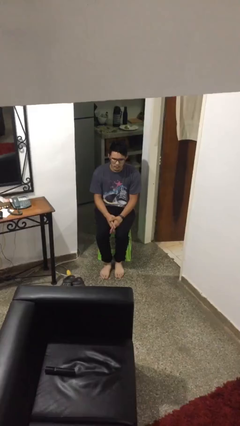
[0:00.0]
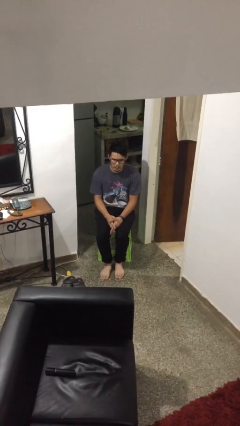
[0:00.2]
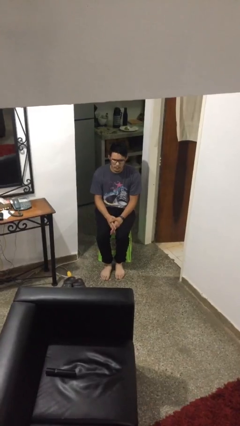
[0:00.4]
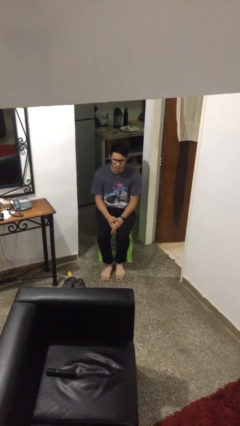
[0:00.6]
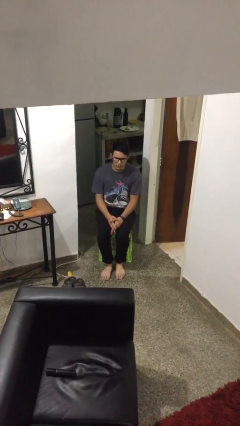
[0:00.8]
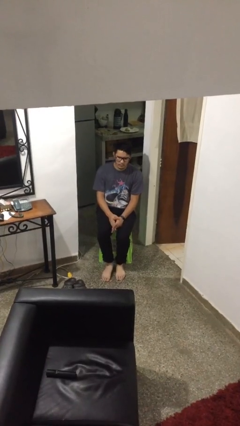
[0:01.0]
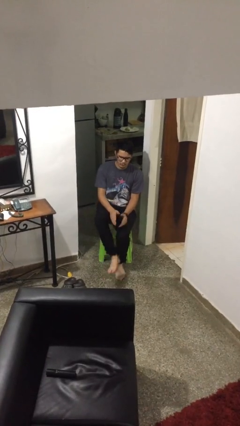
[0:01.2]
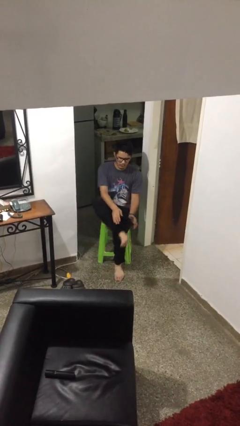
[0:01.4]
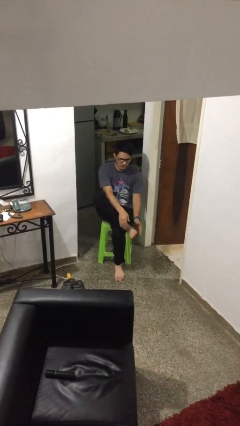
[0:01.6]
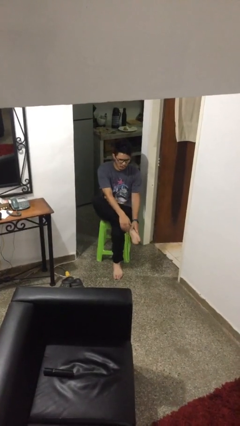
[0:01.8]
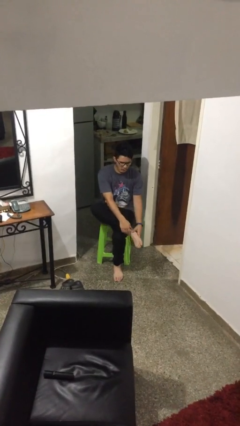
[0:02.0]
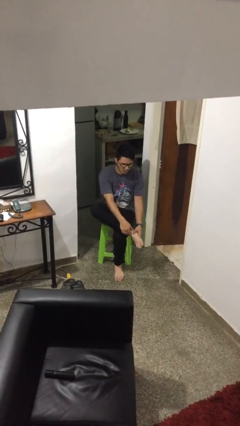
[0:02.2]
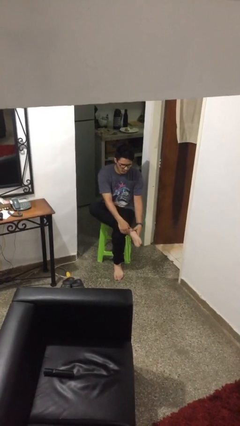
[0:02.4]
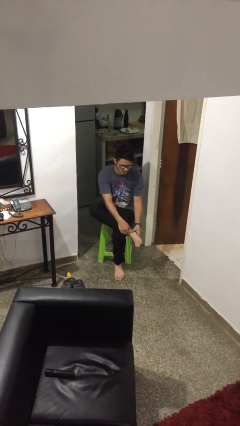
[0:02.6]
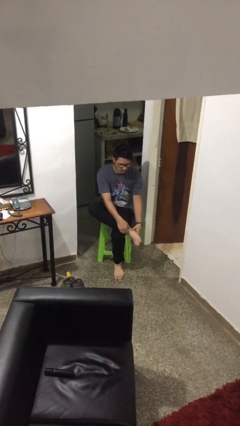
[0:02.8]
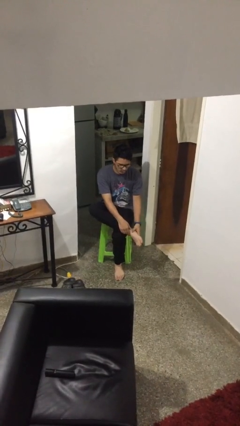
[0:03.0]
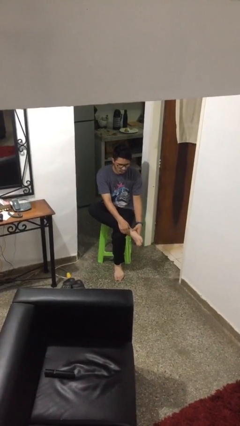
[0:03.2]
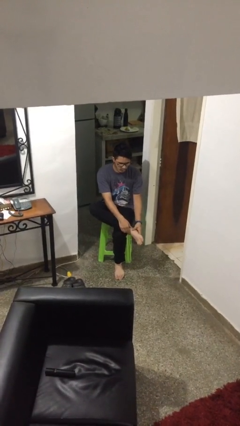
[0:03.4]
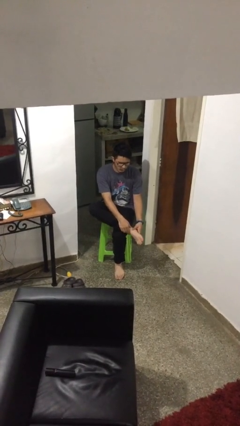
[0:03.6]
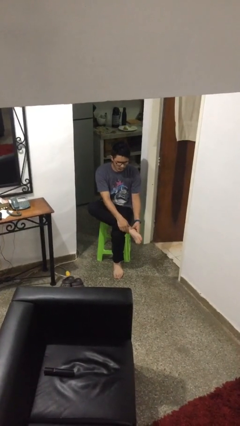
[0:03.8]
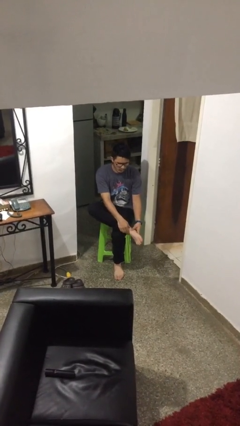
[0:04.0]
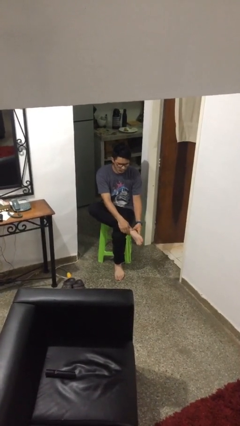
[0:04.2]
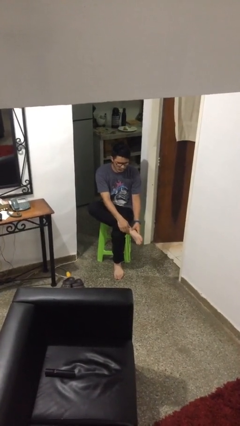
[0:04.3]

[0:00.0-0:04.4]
person rubs foot

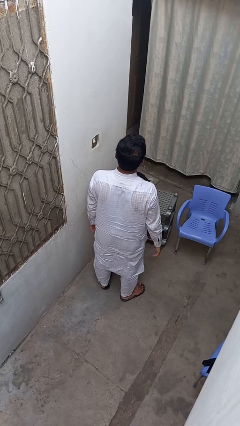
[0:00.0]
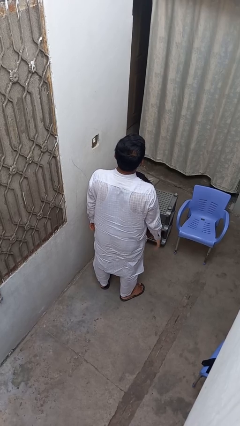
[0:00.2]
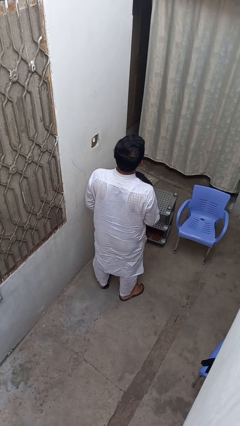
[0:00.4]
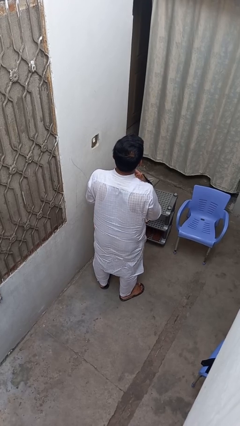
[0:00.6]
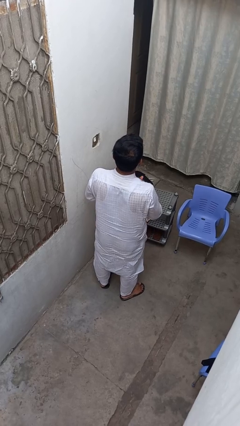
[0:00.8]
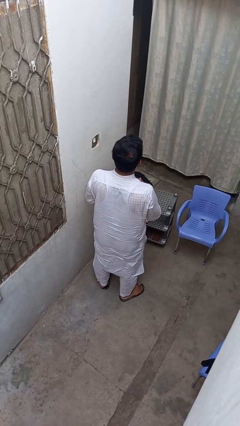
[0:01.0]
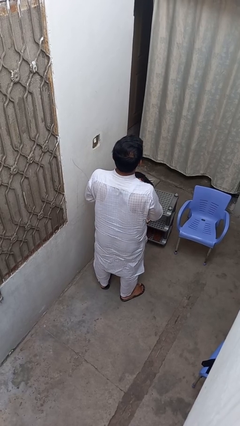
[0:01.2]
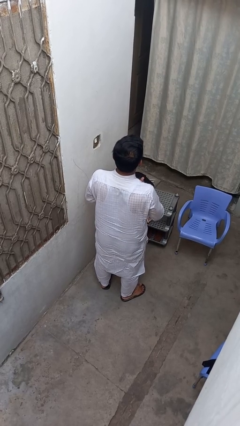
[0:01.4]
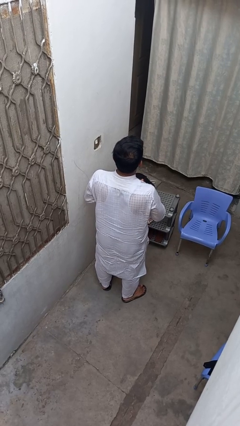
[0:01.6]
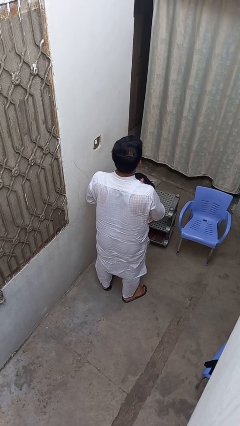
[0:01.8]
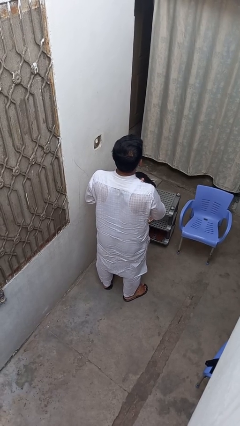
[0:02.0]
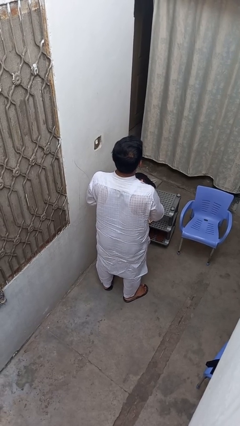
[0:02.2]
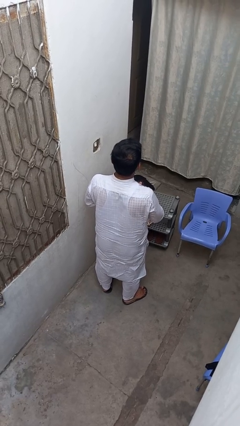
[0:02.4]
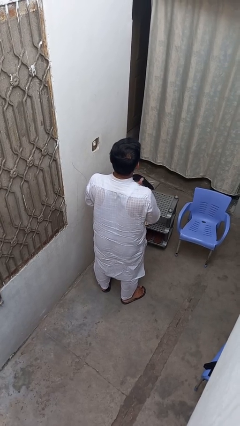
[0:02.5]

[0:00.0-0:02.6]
person drums on chest

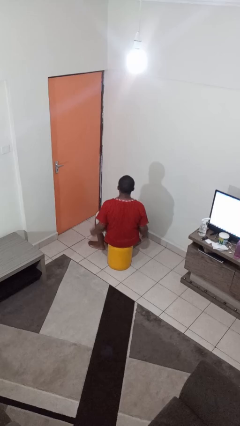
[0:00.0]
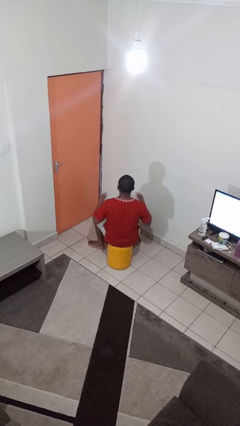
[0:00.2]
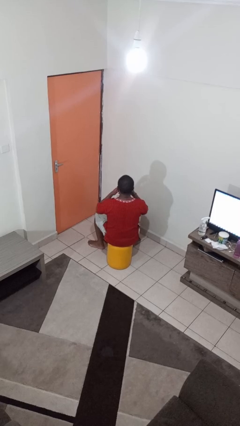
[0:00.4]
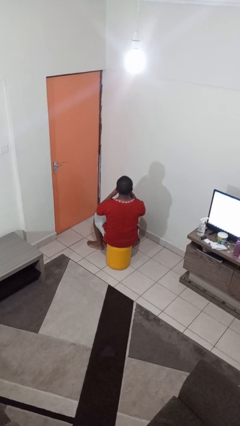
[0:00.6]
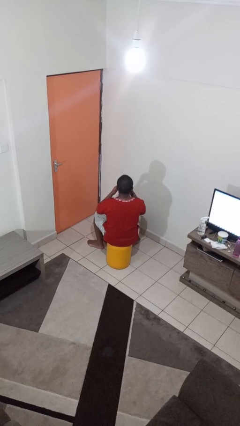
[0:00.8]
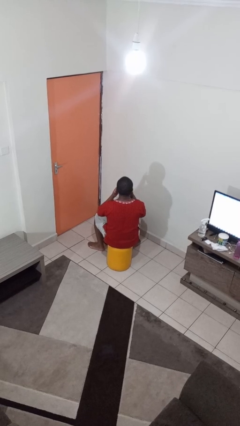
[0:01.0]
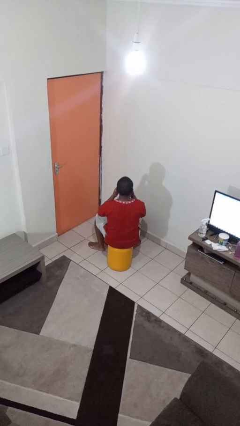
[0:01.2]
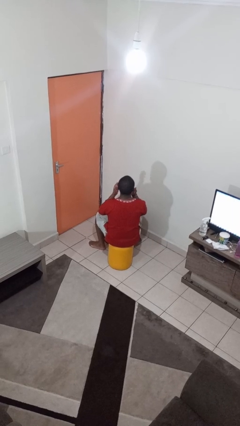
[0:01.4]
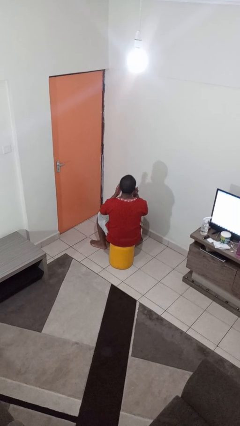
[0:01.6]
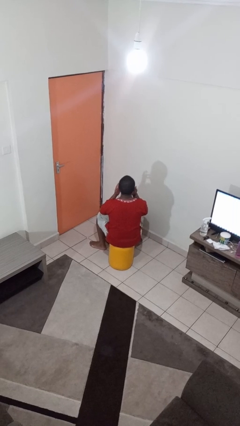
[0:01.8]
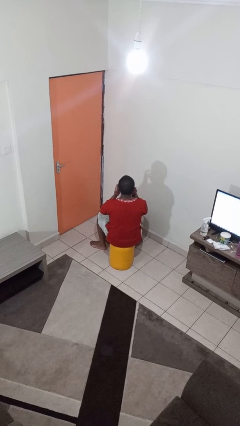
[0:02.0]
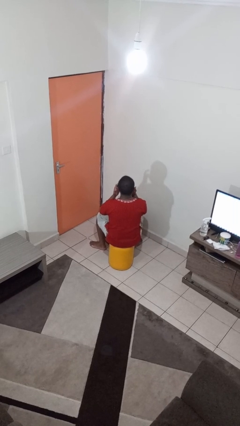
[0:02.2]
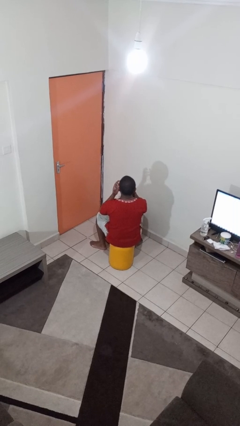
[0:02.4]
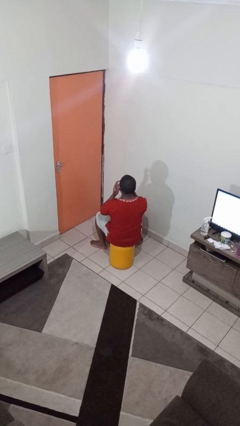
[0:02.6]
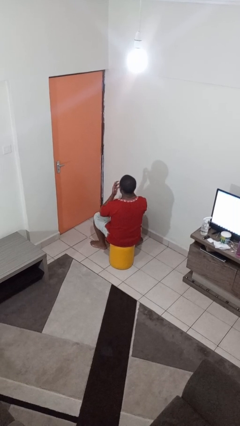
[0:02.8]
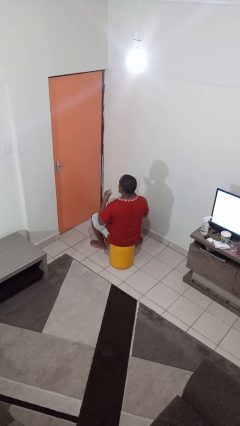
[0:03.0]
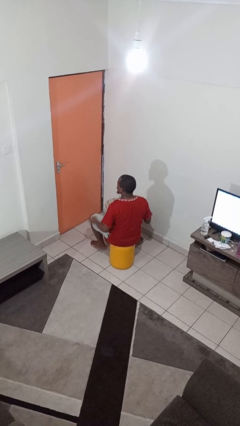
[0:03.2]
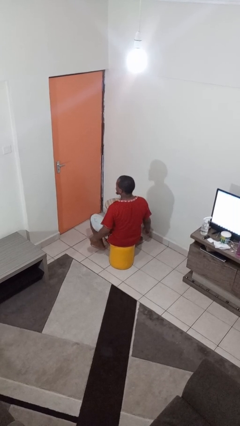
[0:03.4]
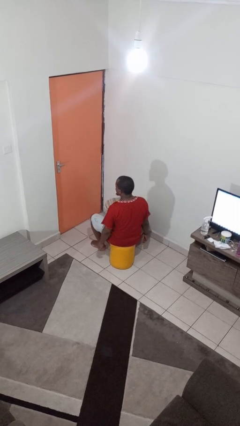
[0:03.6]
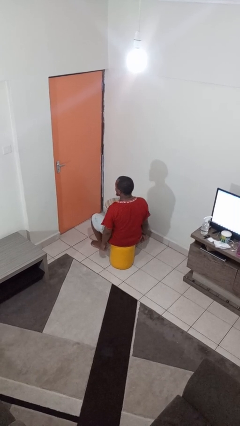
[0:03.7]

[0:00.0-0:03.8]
person licks fingers

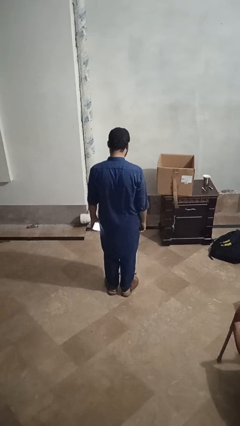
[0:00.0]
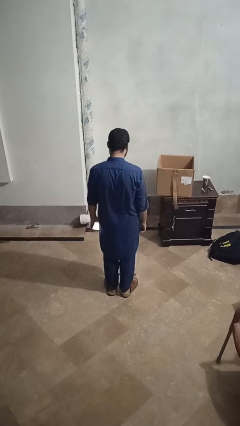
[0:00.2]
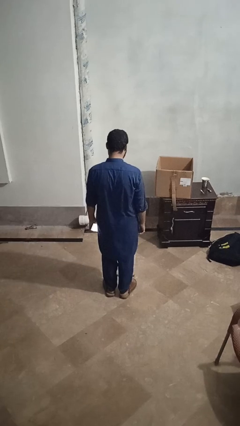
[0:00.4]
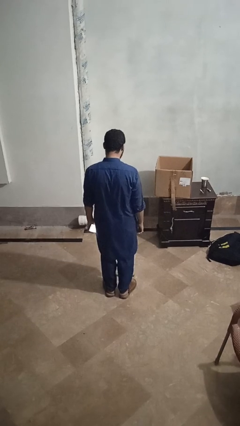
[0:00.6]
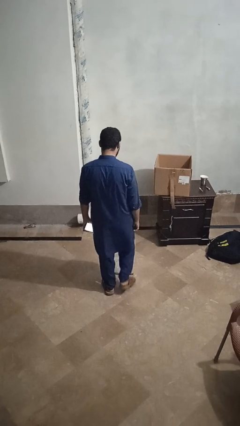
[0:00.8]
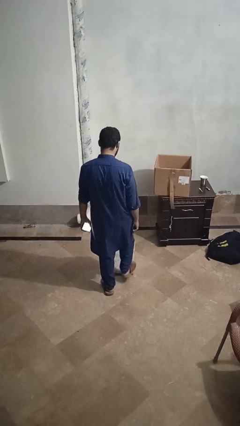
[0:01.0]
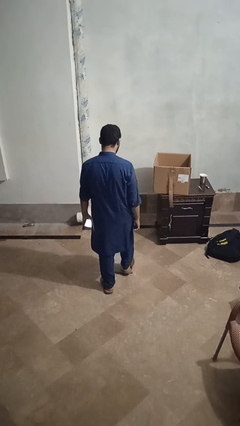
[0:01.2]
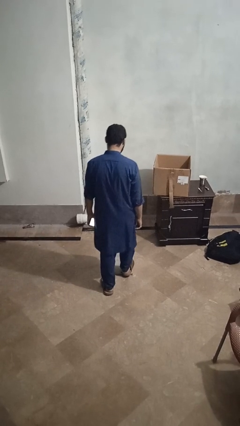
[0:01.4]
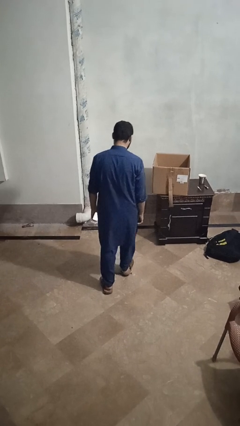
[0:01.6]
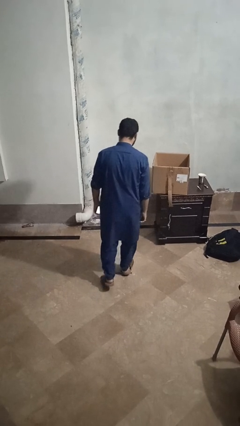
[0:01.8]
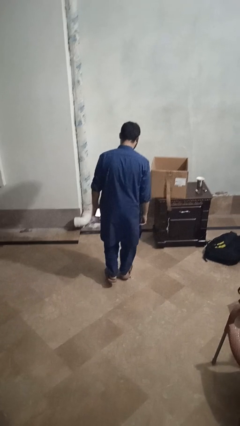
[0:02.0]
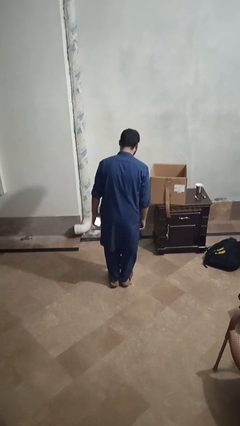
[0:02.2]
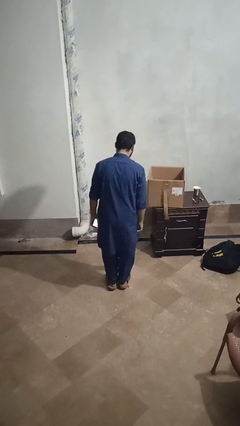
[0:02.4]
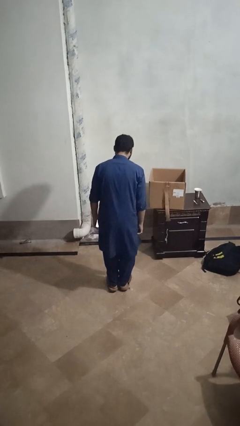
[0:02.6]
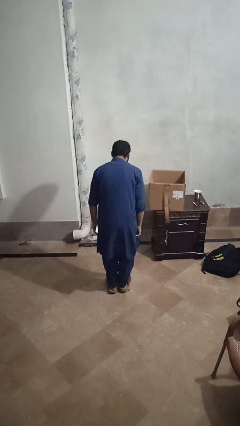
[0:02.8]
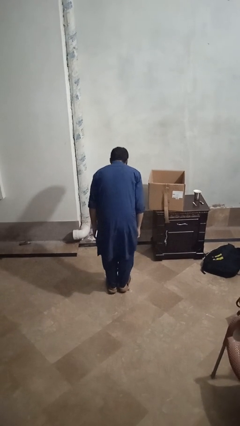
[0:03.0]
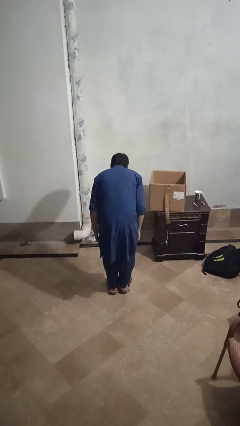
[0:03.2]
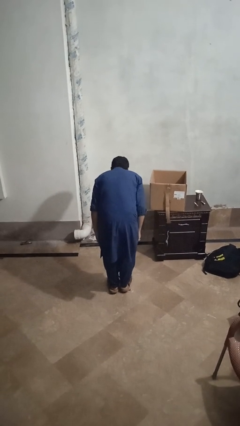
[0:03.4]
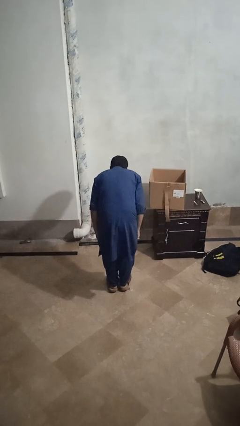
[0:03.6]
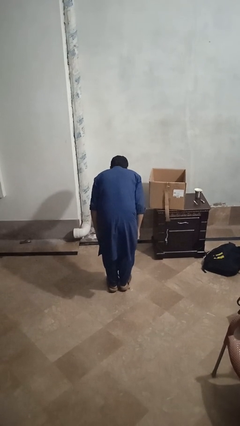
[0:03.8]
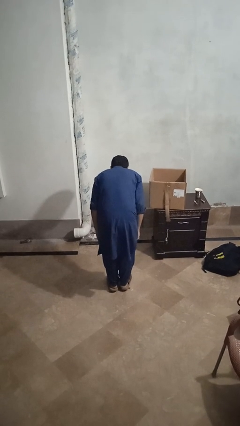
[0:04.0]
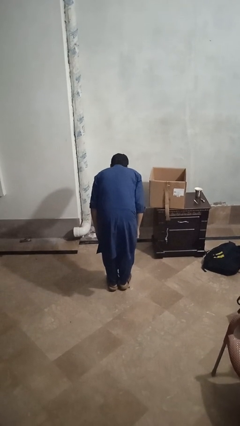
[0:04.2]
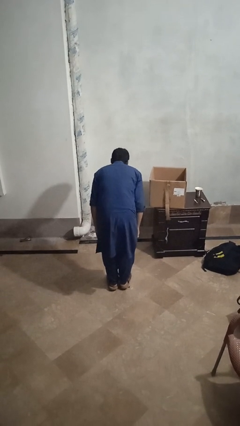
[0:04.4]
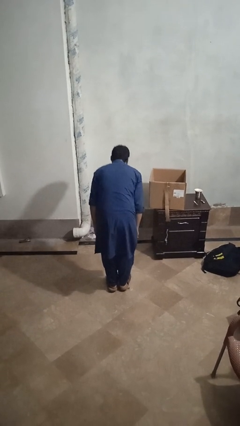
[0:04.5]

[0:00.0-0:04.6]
person uses bodyweight scale

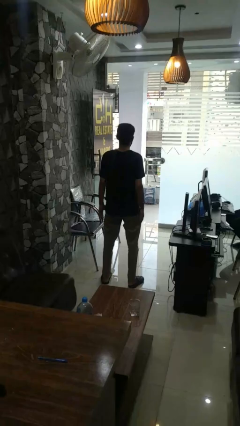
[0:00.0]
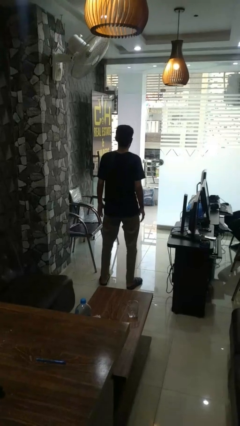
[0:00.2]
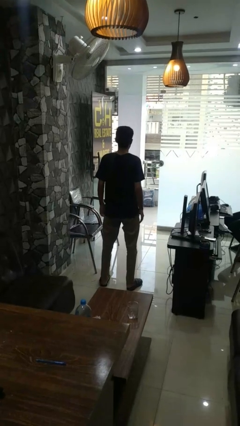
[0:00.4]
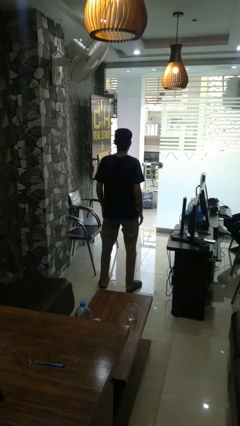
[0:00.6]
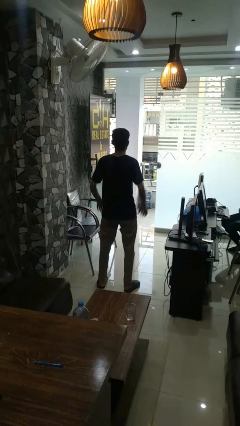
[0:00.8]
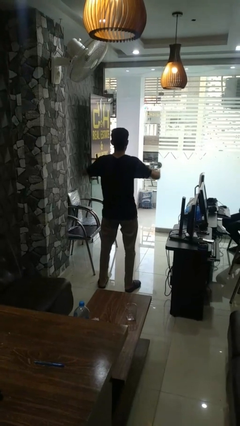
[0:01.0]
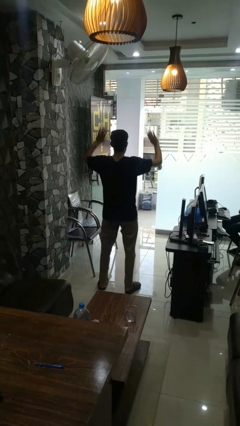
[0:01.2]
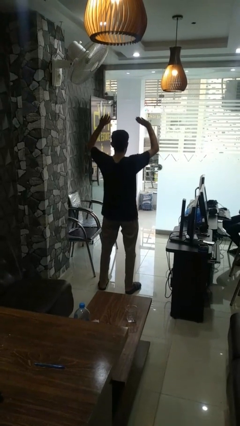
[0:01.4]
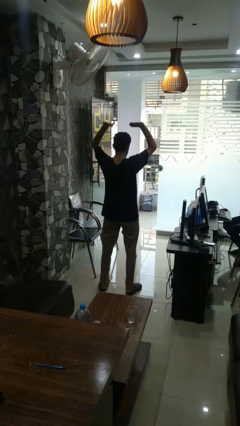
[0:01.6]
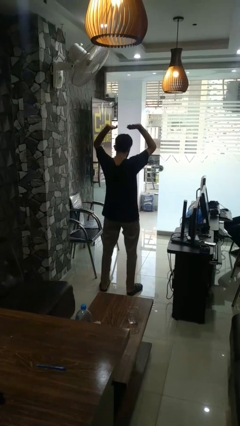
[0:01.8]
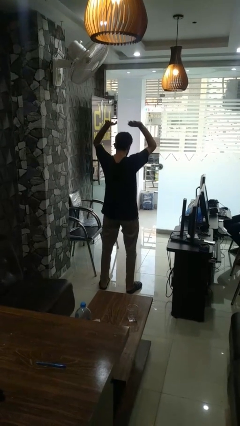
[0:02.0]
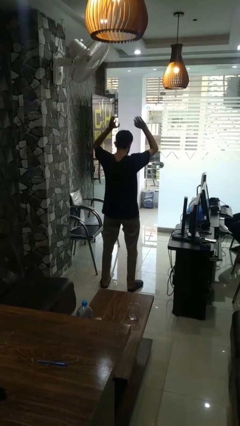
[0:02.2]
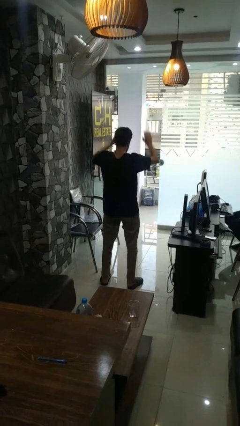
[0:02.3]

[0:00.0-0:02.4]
person stretches arms over head
